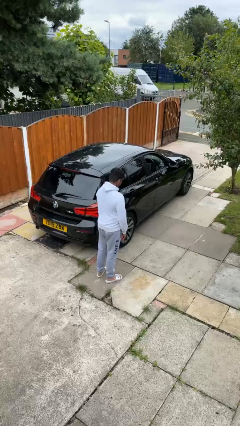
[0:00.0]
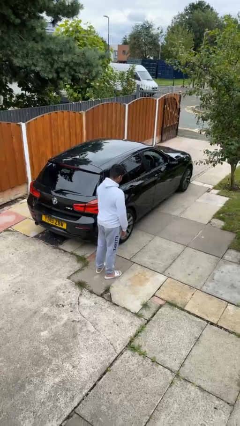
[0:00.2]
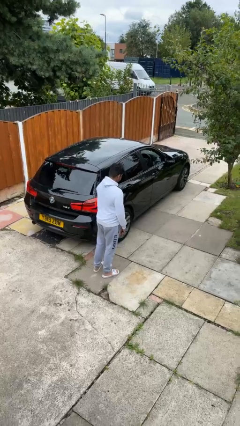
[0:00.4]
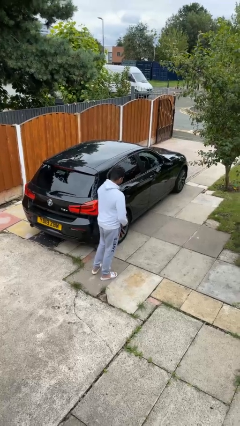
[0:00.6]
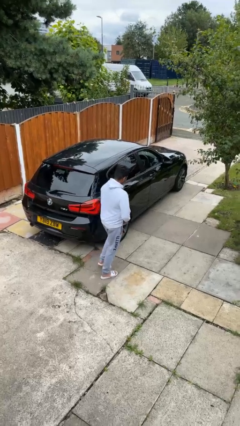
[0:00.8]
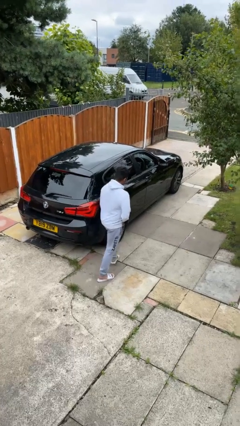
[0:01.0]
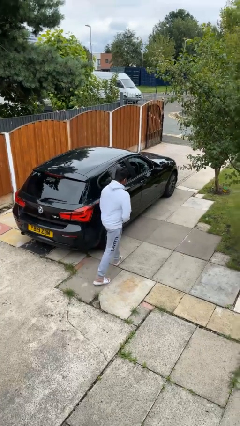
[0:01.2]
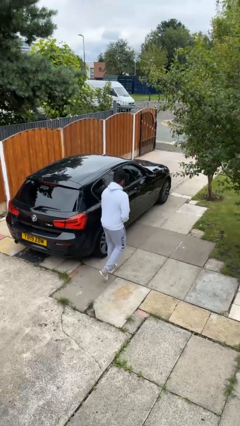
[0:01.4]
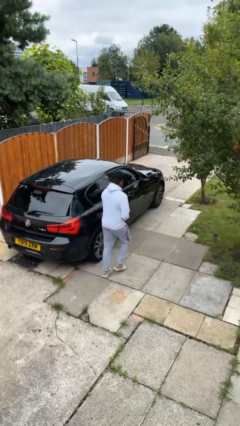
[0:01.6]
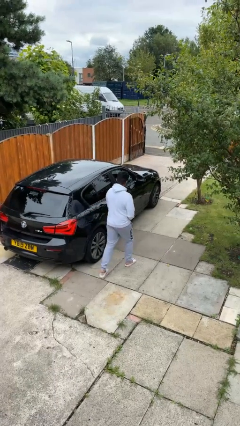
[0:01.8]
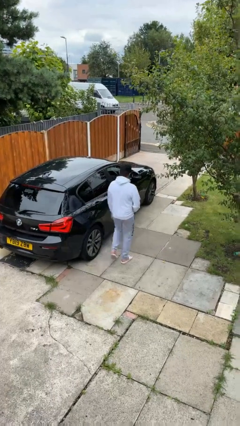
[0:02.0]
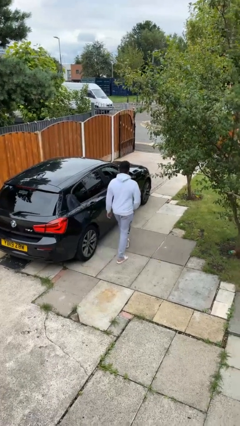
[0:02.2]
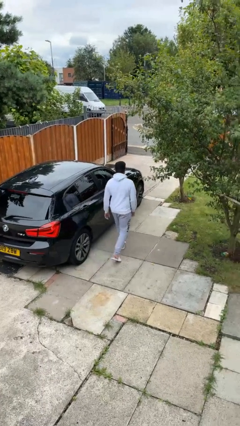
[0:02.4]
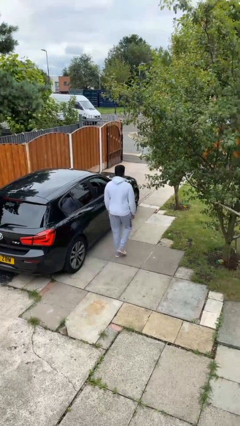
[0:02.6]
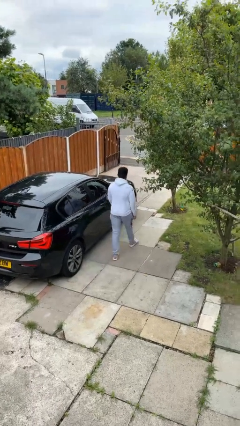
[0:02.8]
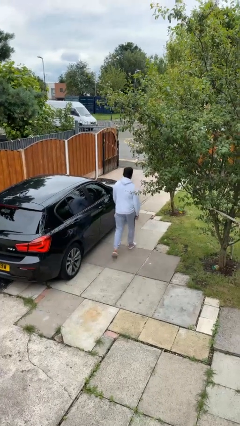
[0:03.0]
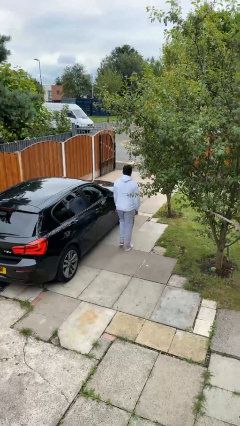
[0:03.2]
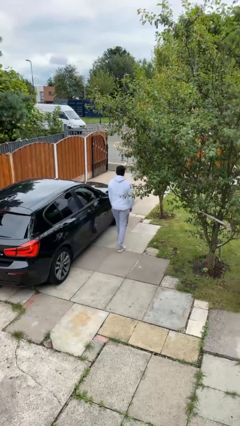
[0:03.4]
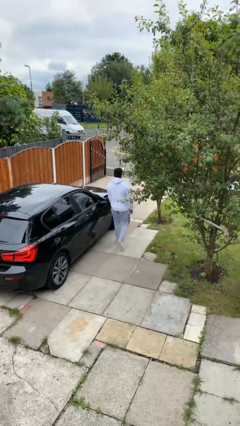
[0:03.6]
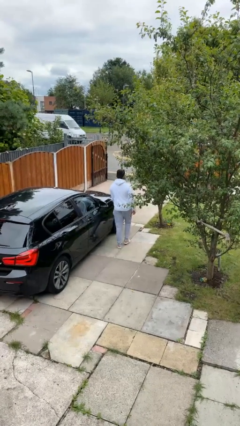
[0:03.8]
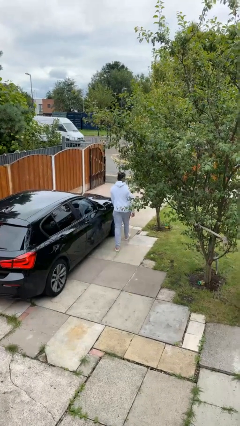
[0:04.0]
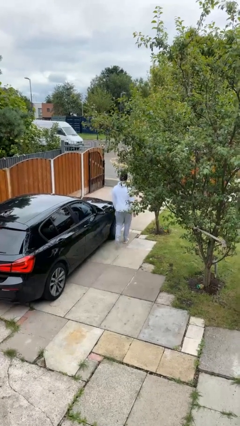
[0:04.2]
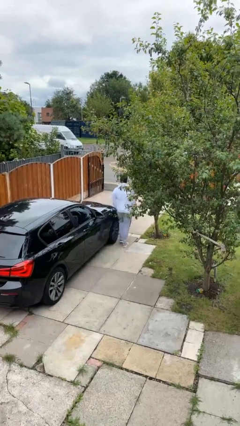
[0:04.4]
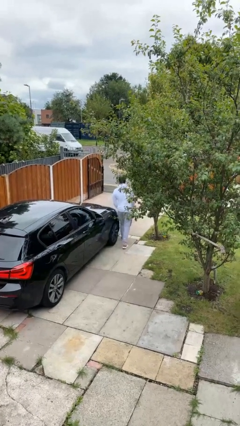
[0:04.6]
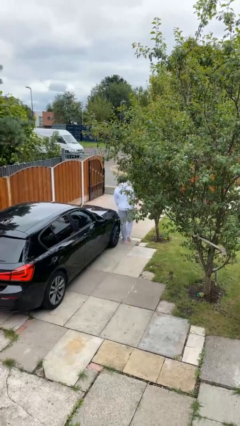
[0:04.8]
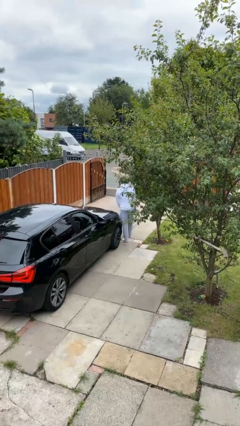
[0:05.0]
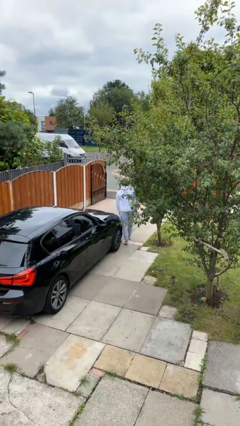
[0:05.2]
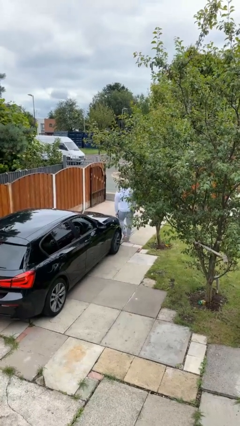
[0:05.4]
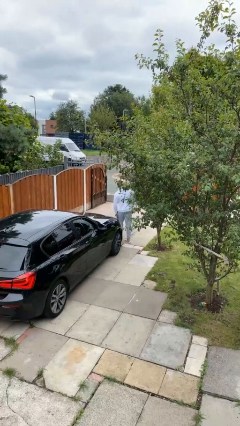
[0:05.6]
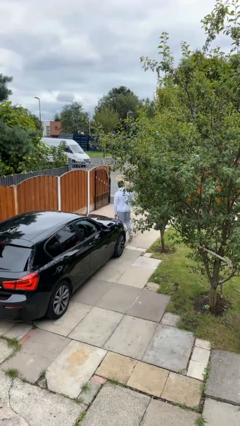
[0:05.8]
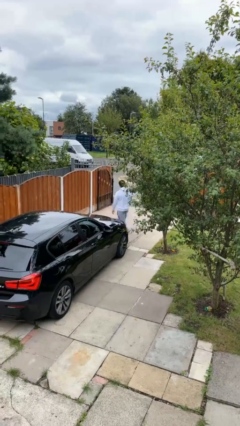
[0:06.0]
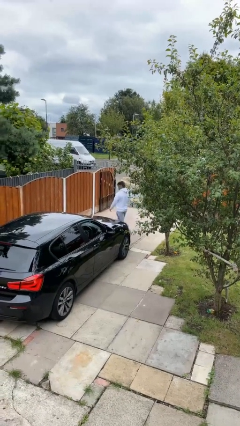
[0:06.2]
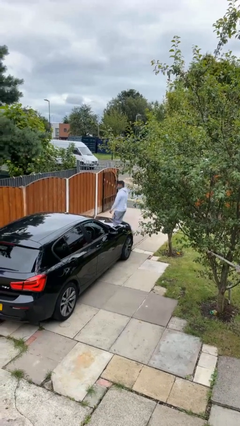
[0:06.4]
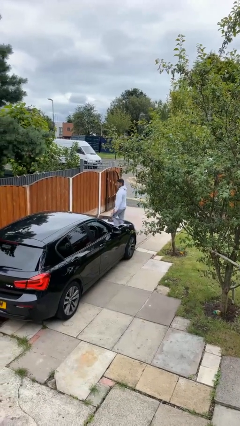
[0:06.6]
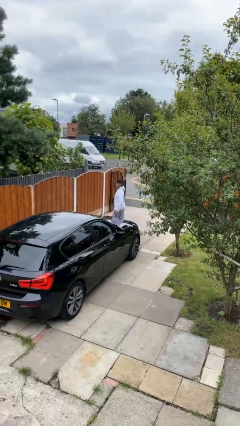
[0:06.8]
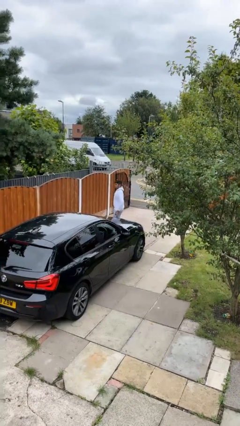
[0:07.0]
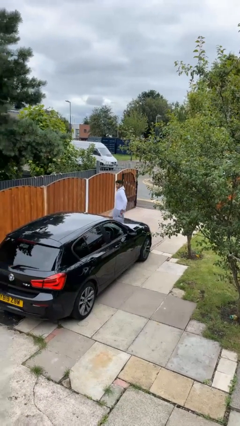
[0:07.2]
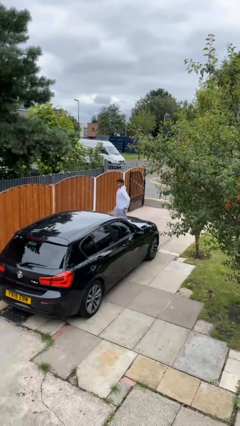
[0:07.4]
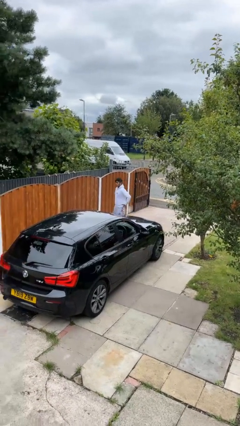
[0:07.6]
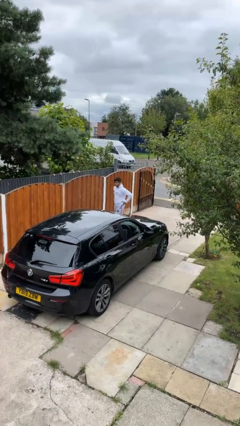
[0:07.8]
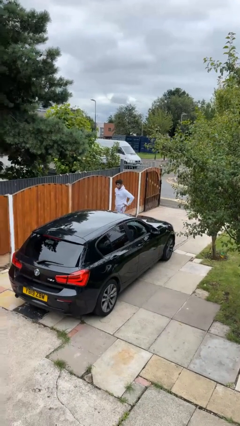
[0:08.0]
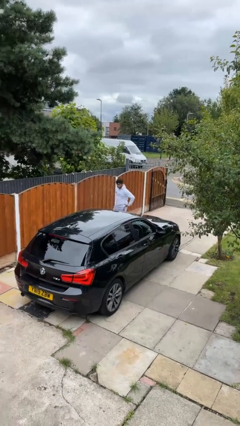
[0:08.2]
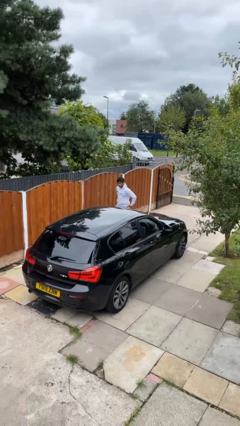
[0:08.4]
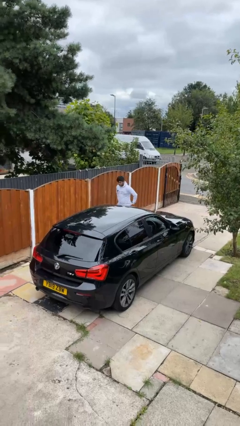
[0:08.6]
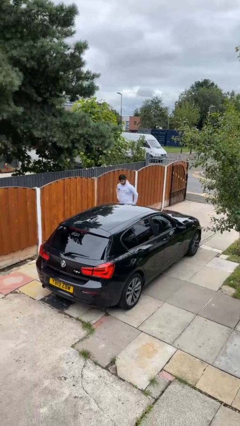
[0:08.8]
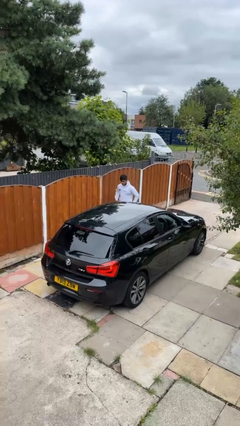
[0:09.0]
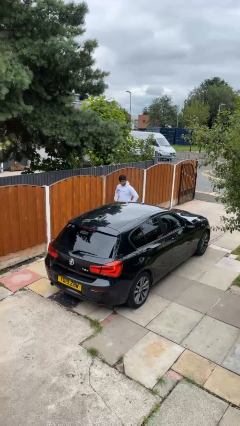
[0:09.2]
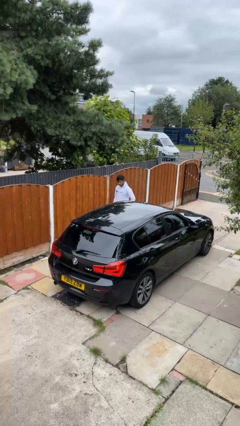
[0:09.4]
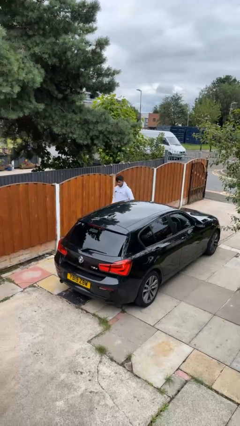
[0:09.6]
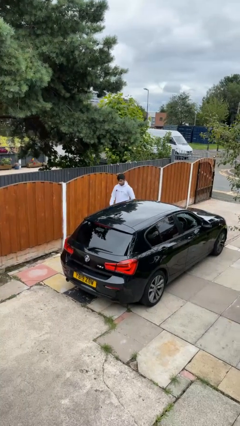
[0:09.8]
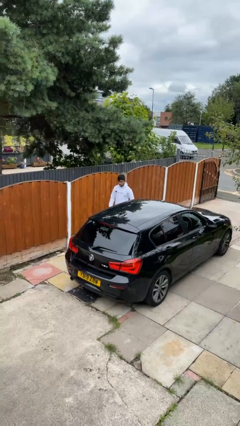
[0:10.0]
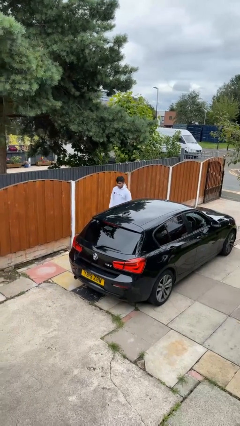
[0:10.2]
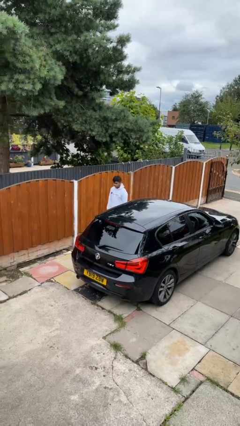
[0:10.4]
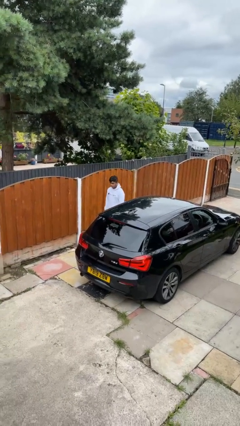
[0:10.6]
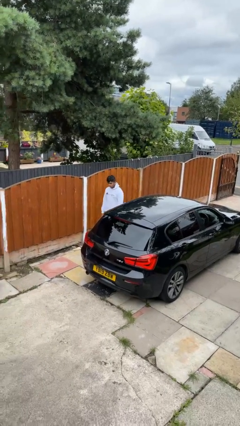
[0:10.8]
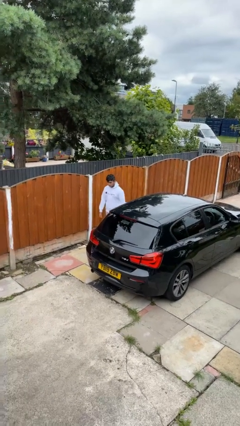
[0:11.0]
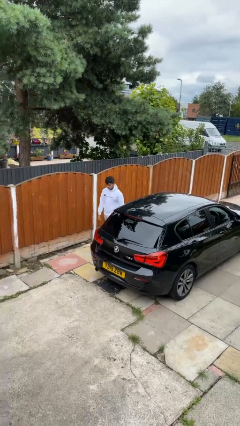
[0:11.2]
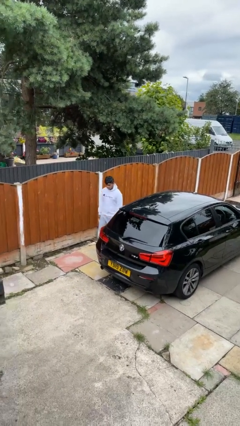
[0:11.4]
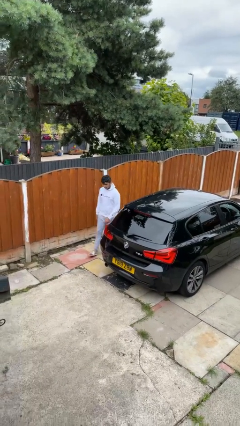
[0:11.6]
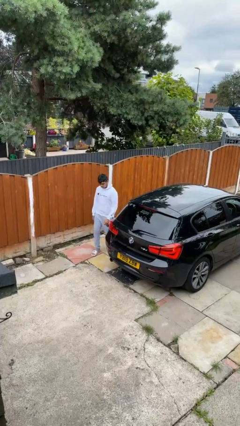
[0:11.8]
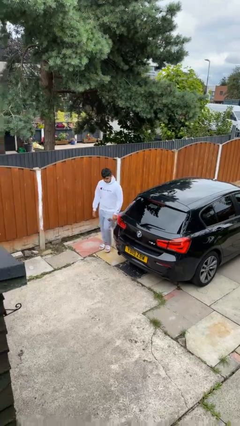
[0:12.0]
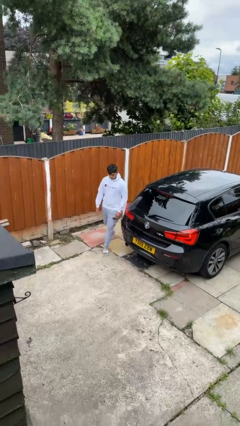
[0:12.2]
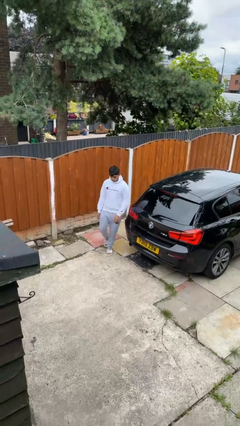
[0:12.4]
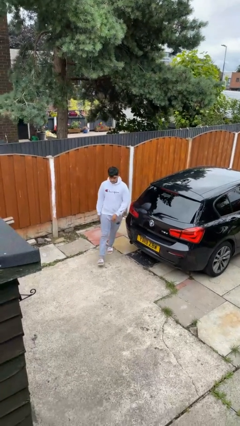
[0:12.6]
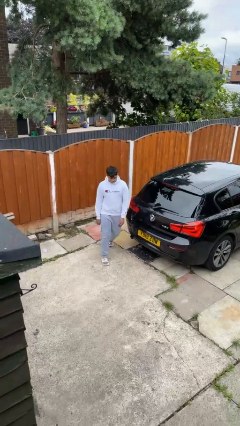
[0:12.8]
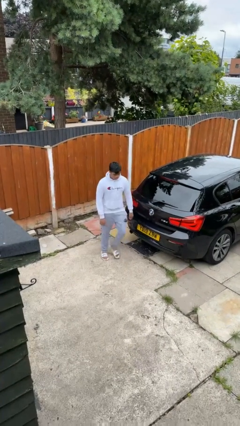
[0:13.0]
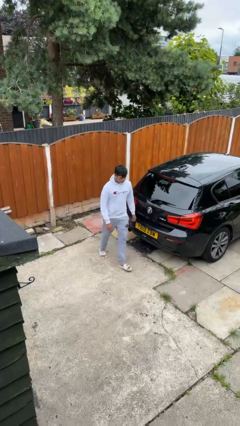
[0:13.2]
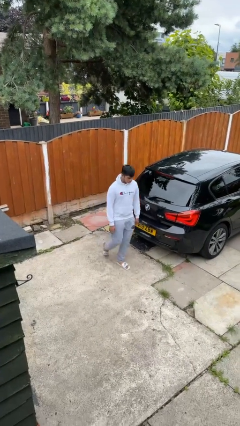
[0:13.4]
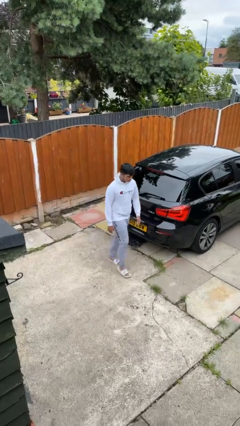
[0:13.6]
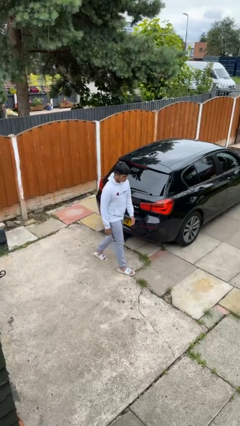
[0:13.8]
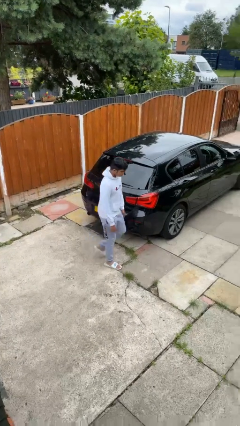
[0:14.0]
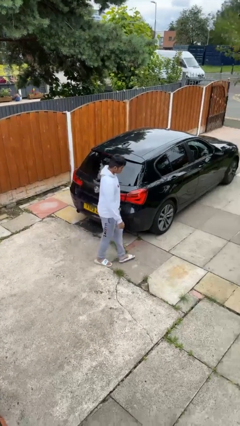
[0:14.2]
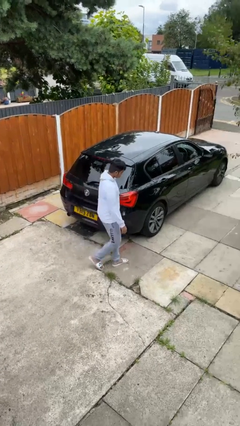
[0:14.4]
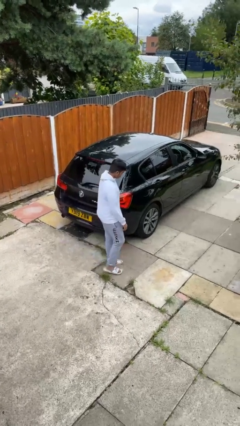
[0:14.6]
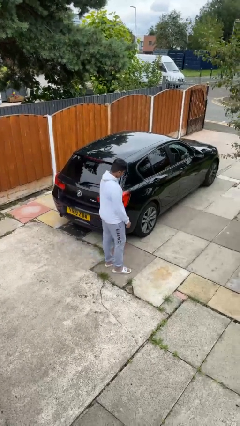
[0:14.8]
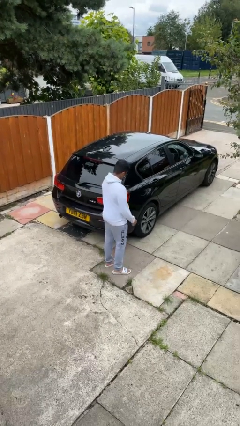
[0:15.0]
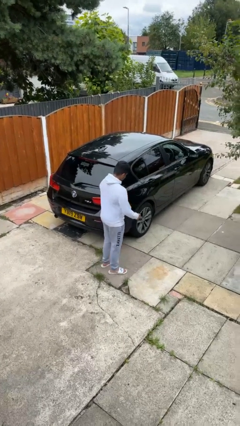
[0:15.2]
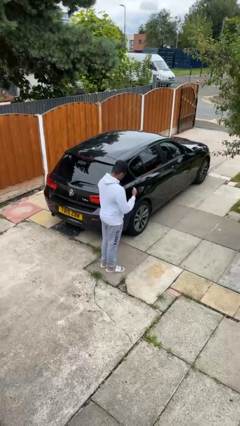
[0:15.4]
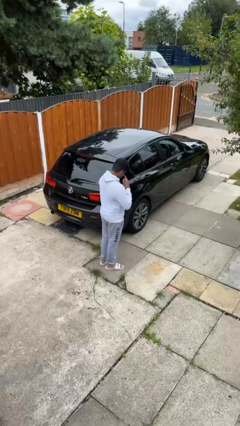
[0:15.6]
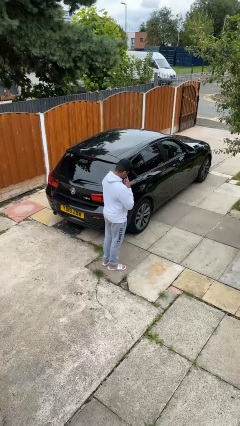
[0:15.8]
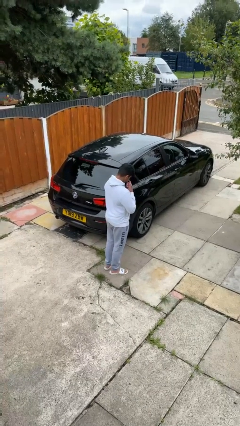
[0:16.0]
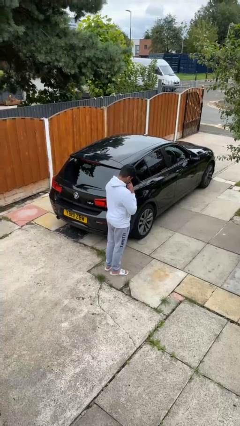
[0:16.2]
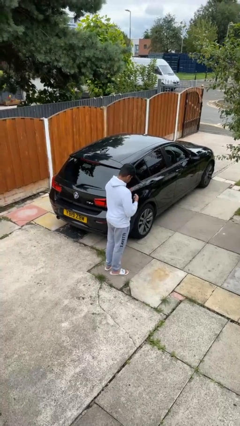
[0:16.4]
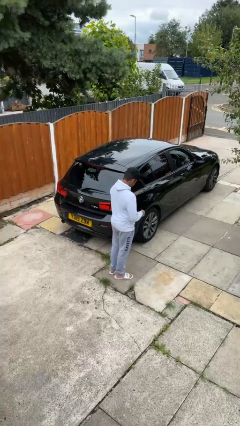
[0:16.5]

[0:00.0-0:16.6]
person walks around car

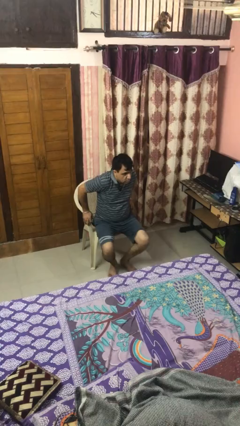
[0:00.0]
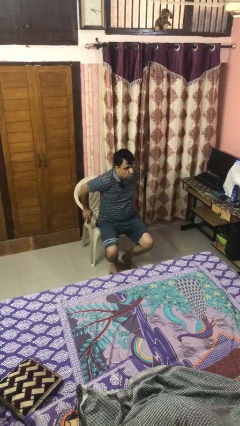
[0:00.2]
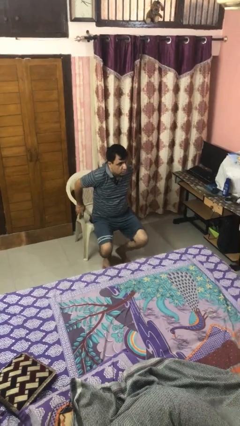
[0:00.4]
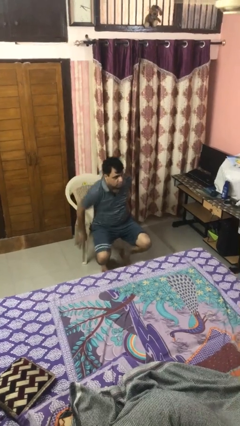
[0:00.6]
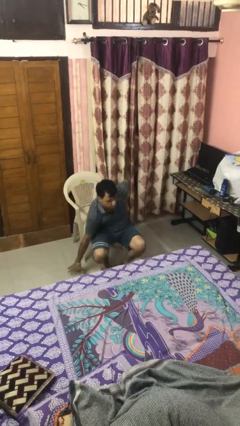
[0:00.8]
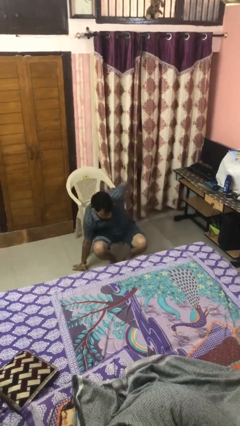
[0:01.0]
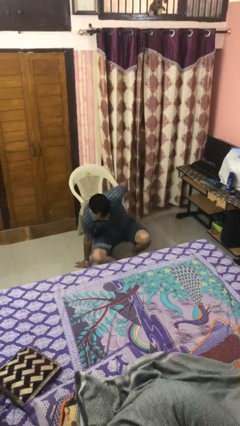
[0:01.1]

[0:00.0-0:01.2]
person falls from chair
